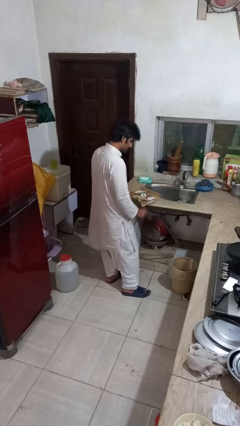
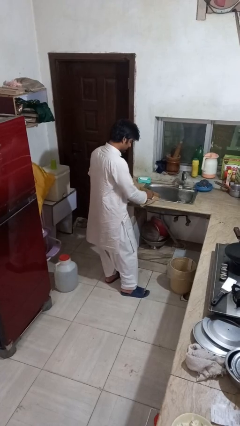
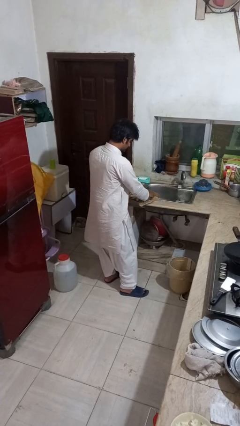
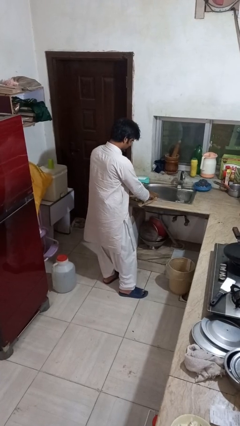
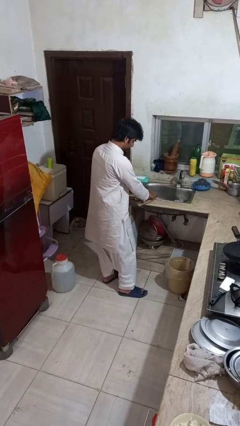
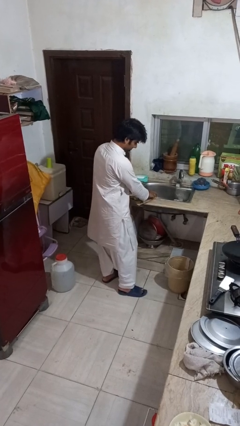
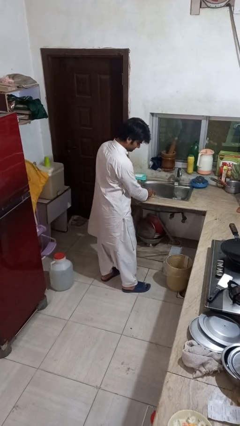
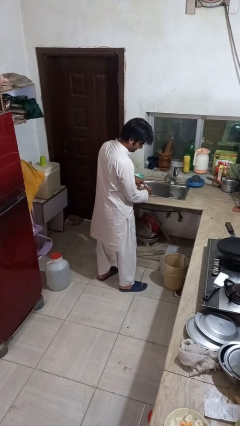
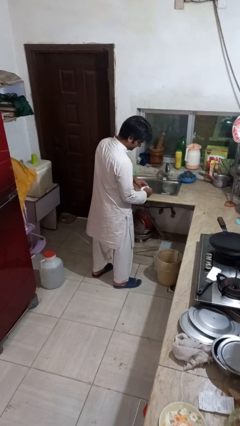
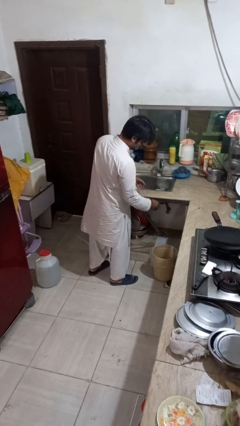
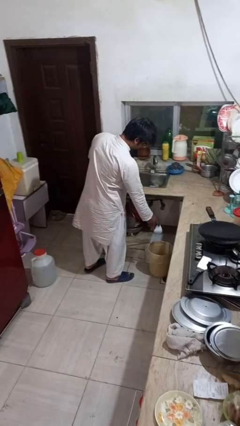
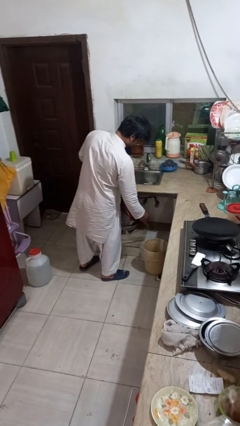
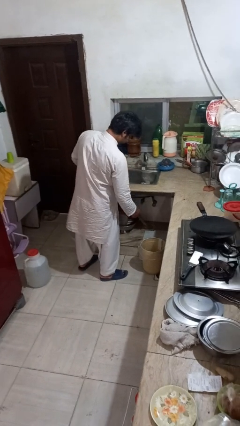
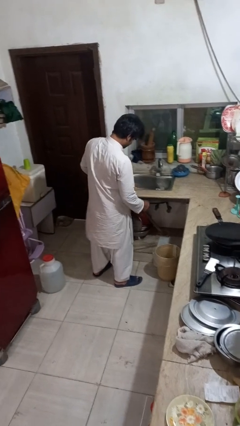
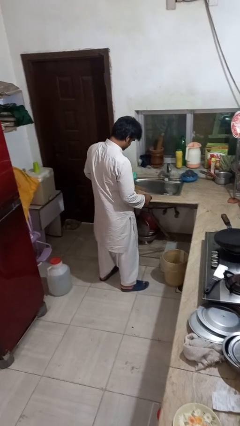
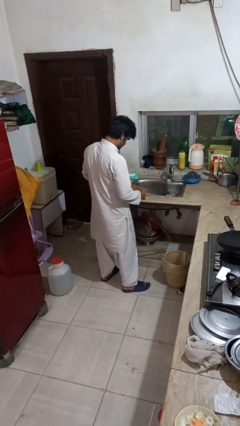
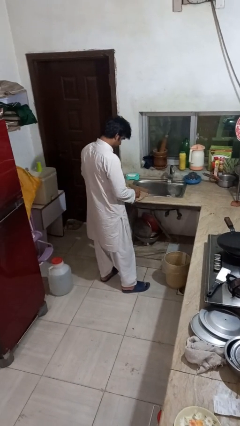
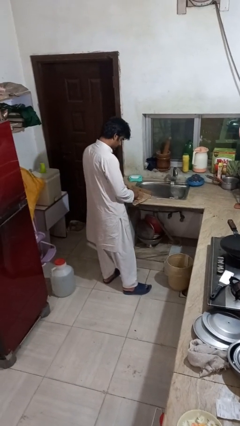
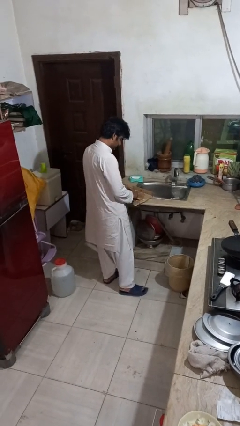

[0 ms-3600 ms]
person discards trash

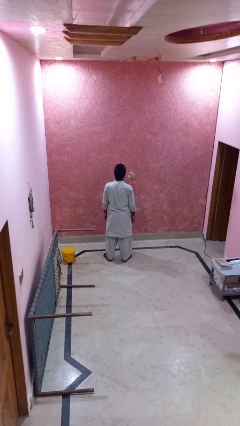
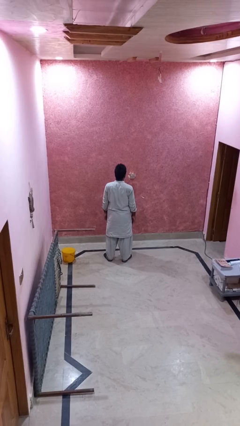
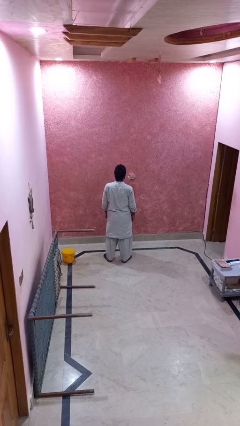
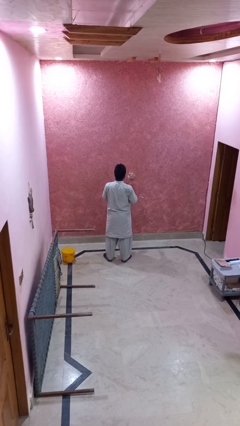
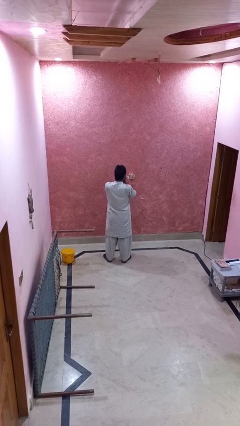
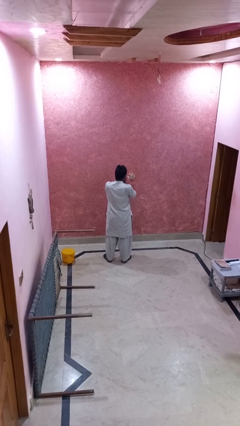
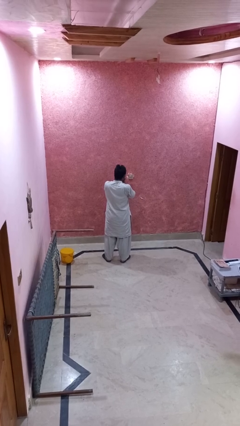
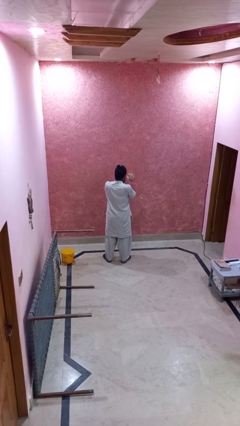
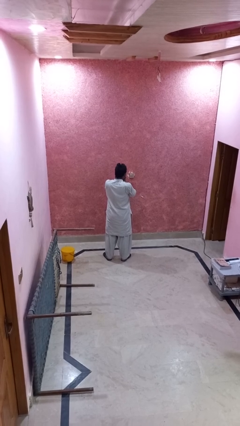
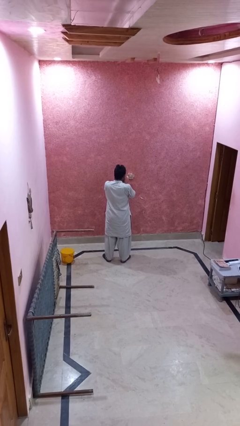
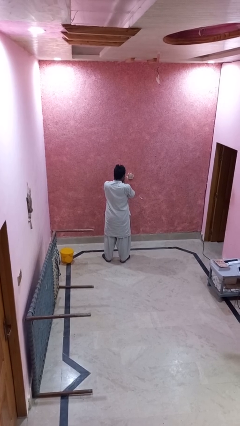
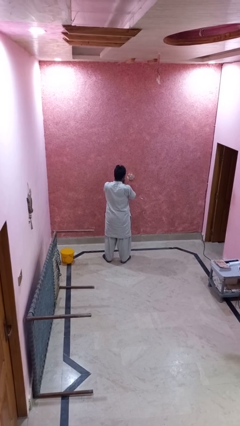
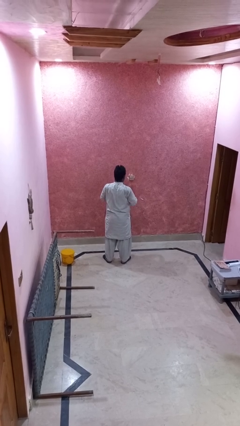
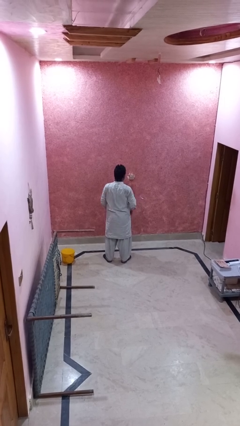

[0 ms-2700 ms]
person sneezes into hand

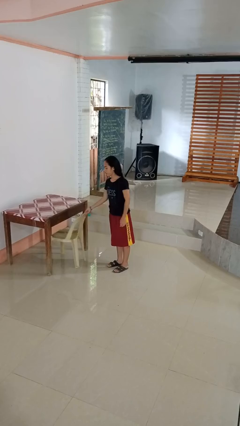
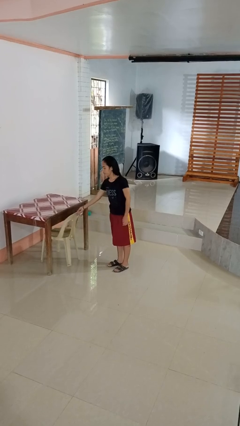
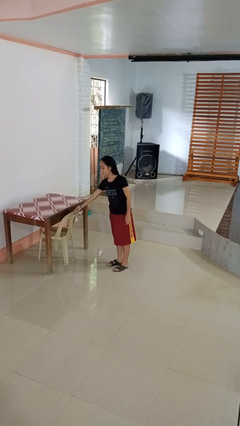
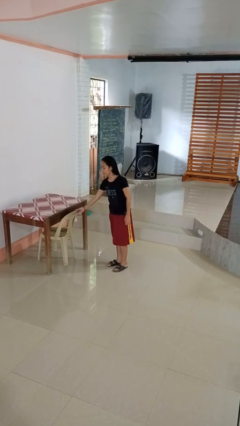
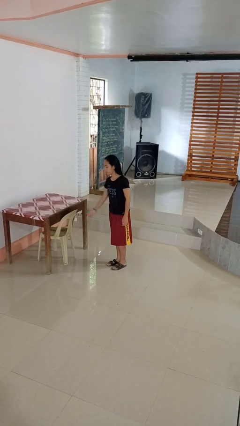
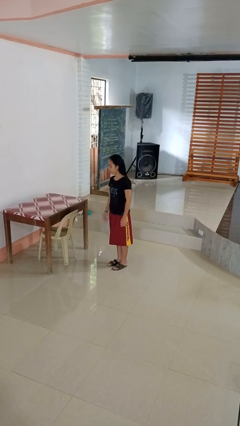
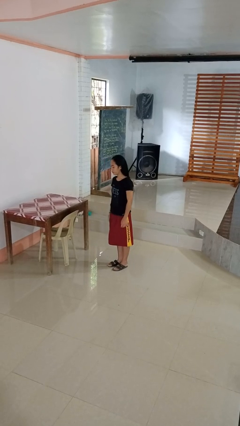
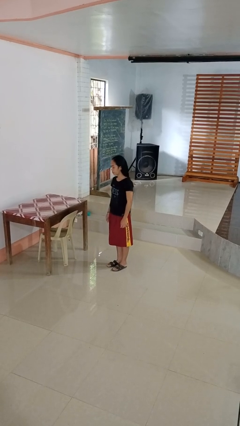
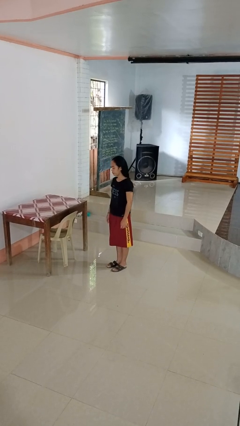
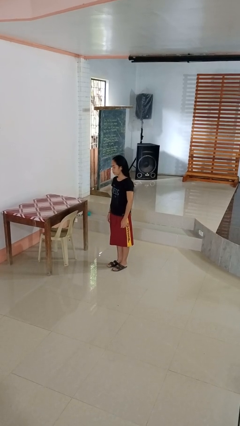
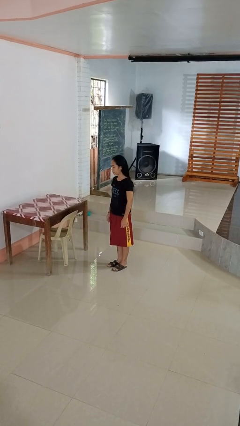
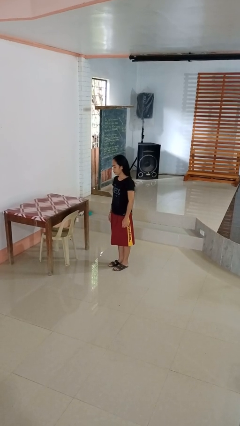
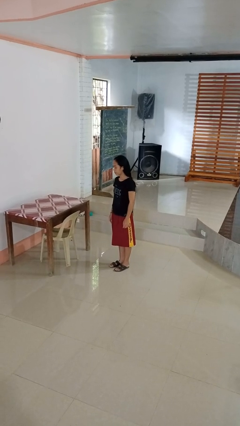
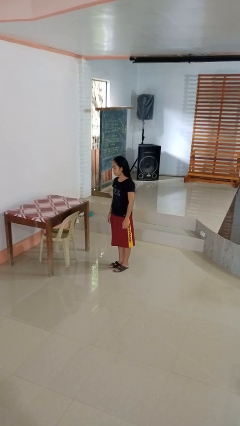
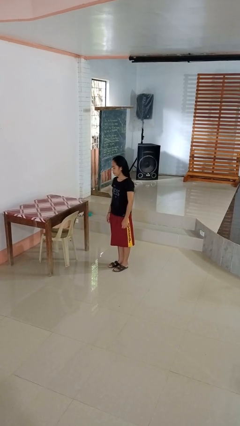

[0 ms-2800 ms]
person pushes in chair

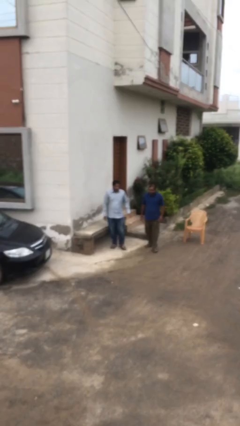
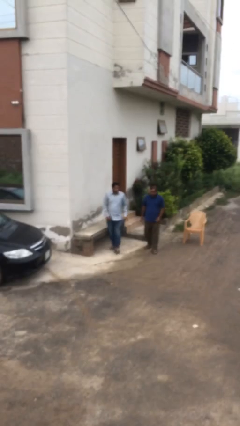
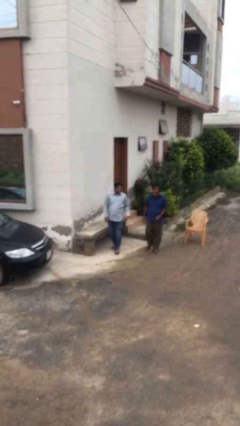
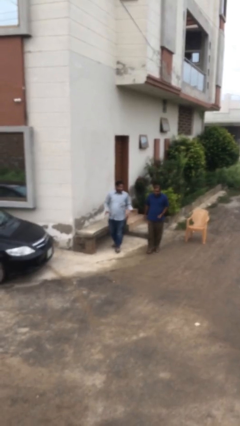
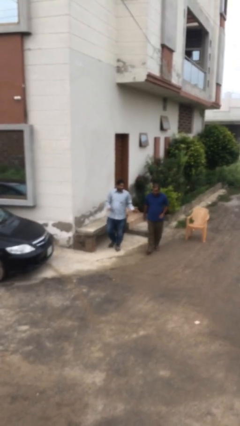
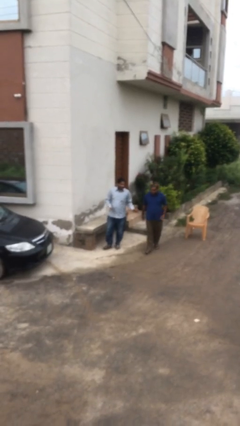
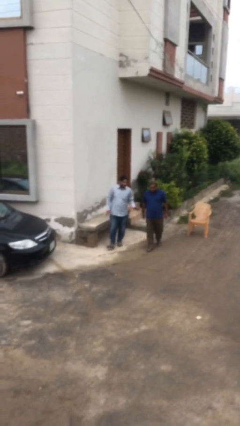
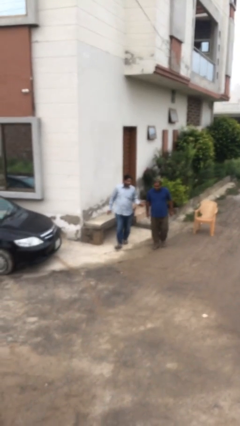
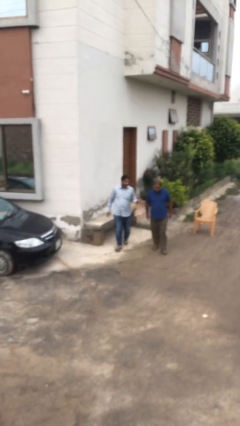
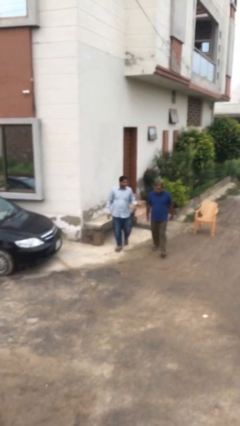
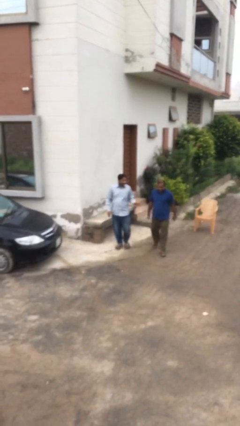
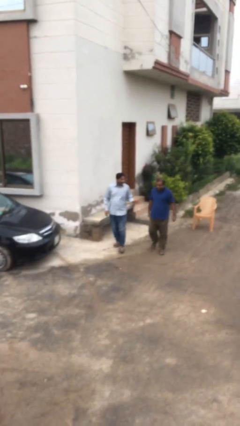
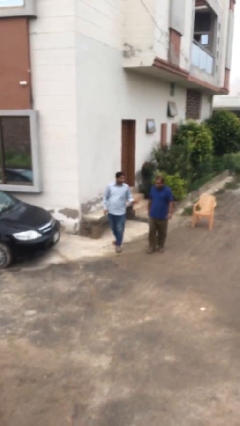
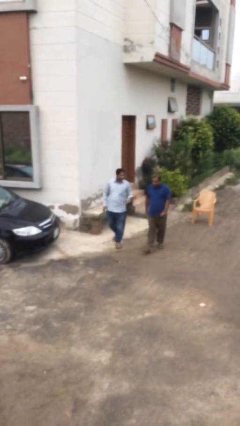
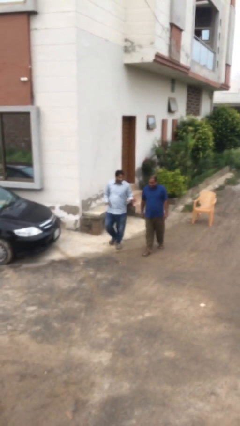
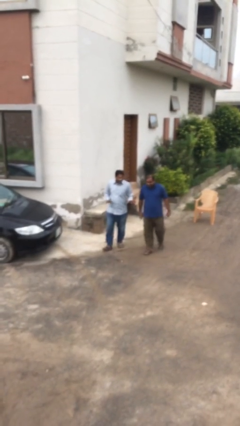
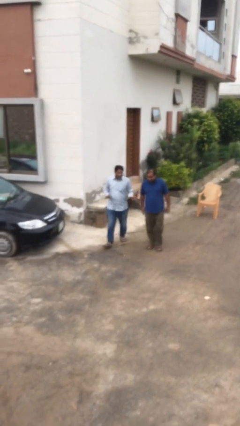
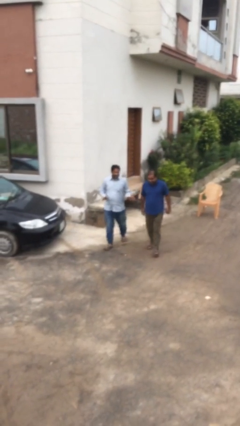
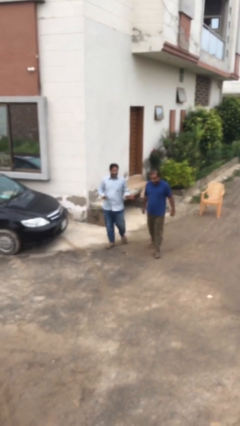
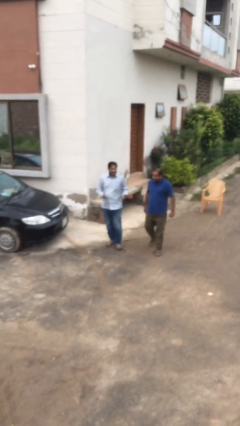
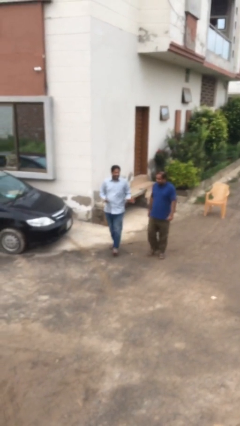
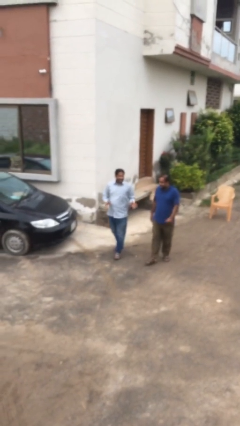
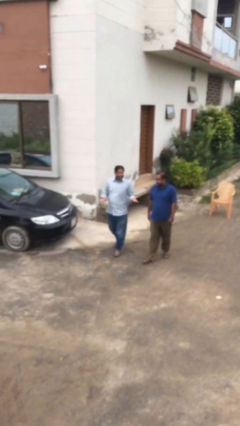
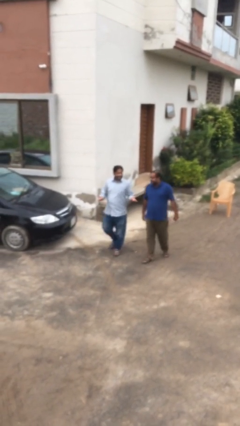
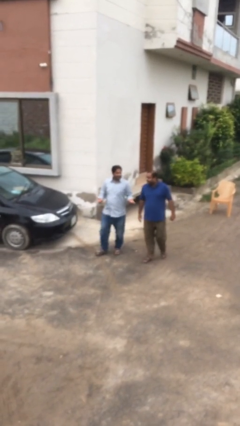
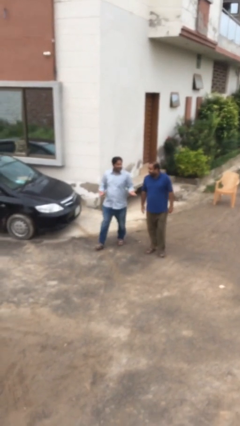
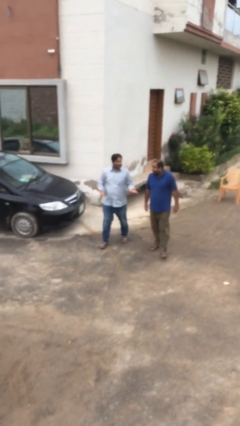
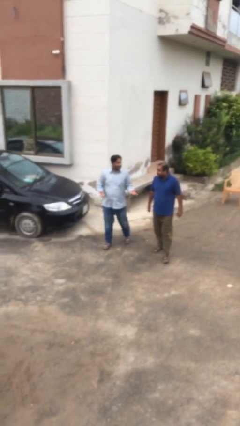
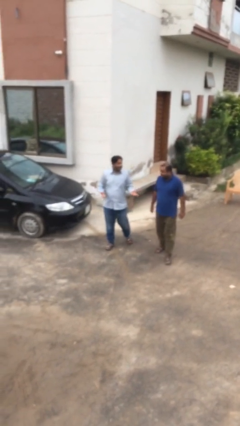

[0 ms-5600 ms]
person talks to person

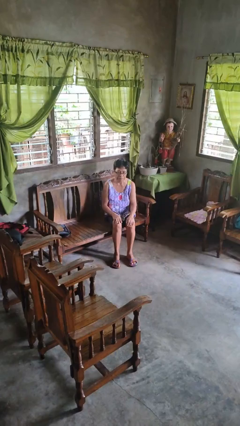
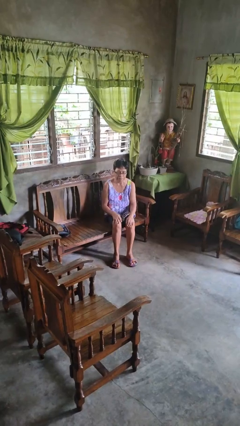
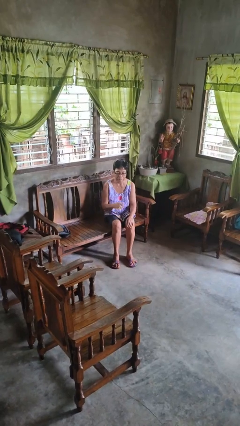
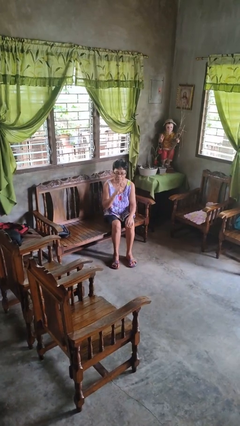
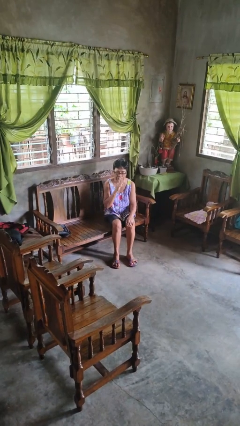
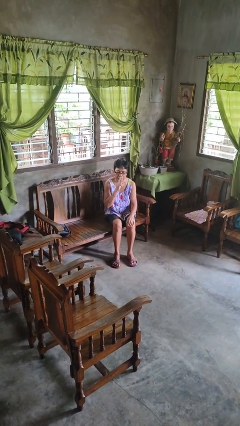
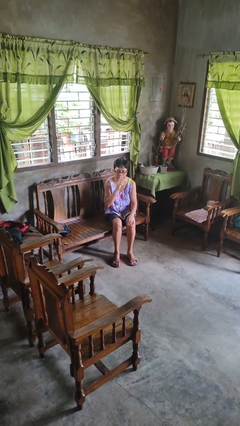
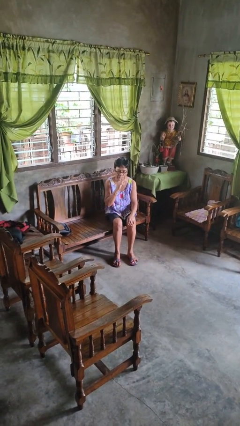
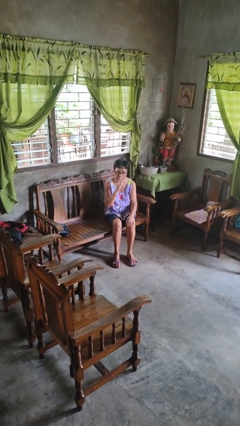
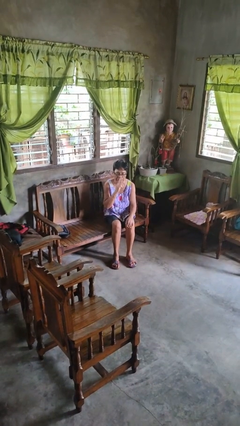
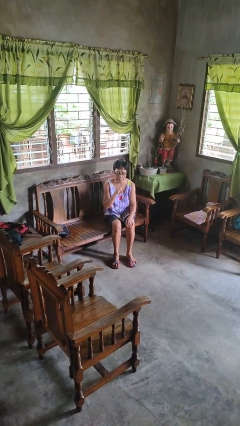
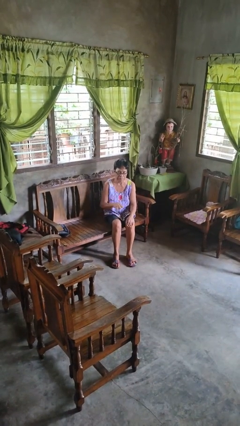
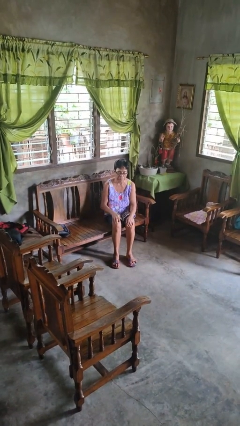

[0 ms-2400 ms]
person gestures be quiet

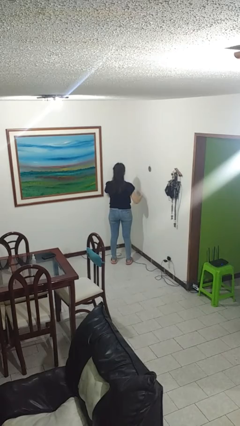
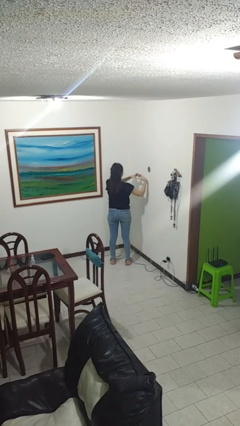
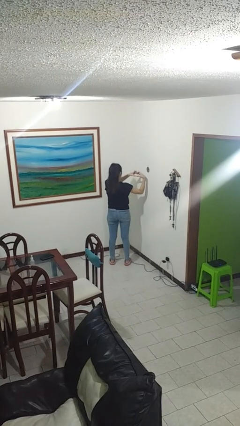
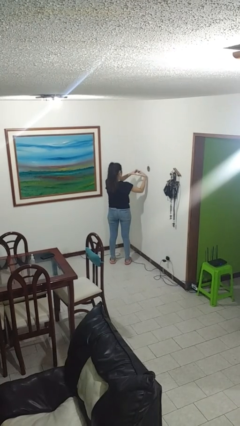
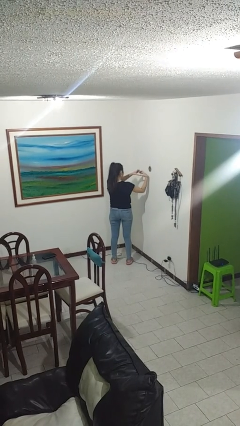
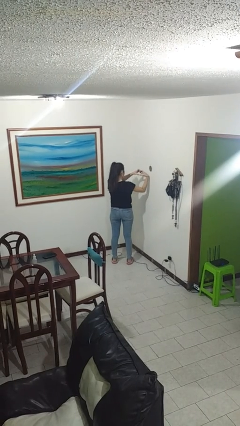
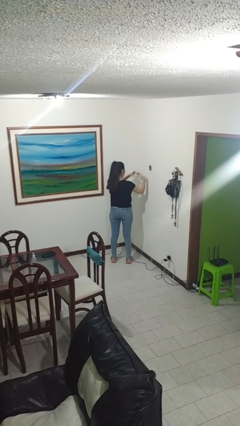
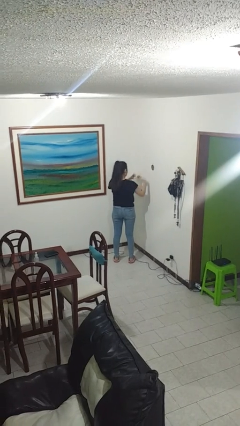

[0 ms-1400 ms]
person gestures heart
